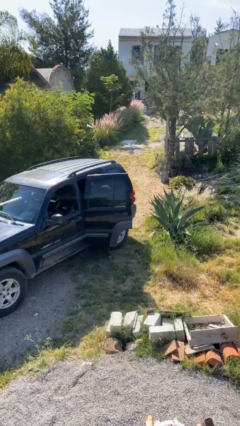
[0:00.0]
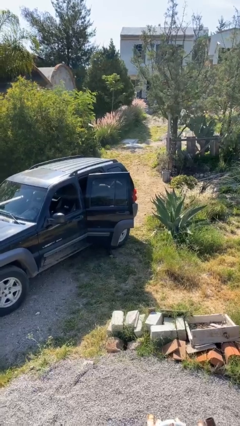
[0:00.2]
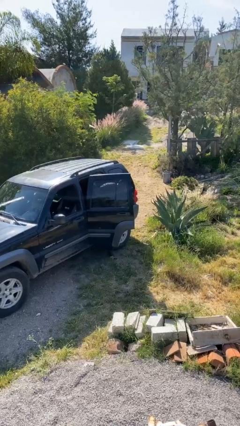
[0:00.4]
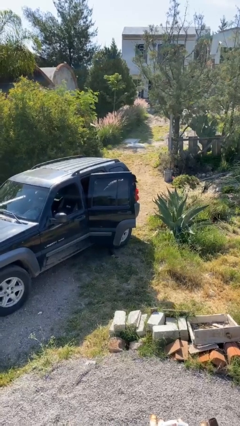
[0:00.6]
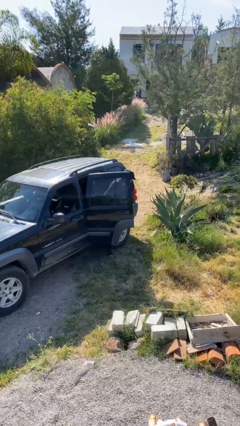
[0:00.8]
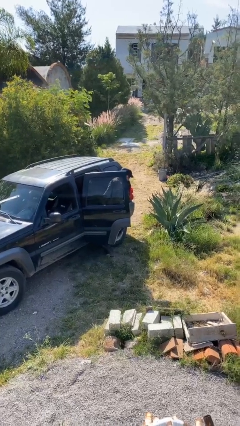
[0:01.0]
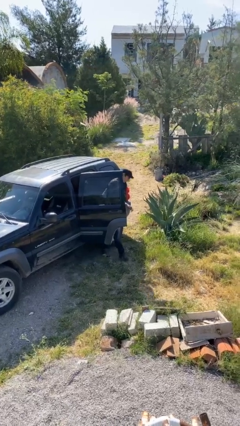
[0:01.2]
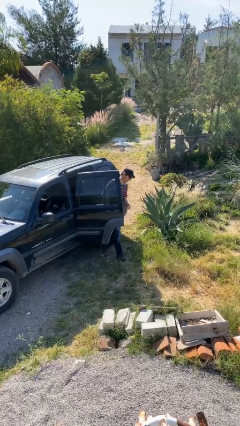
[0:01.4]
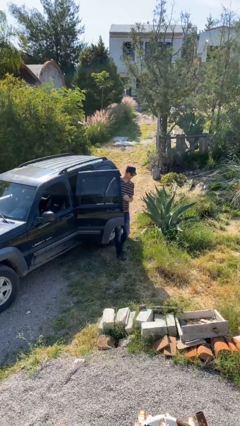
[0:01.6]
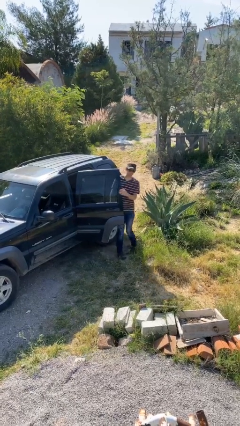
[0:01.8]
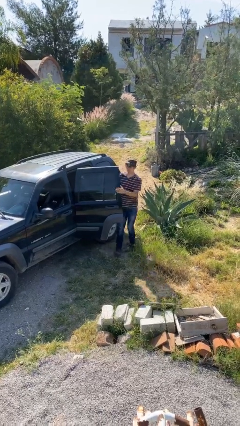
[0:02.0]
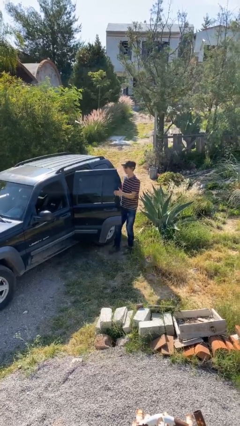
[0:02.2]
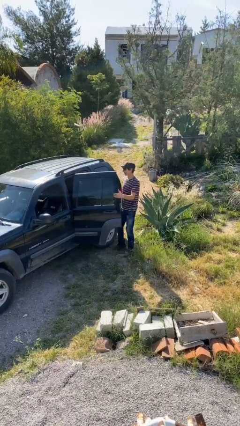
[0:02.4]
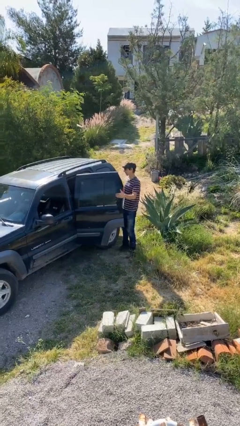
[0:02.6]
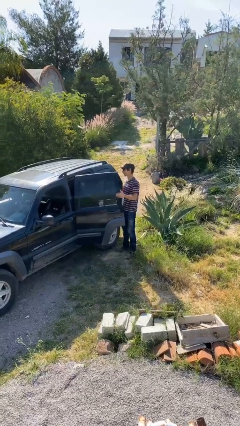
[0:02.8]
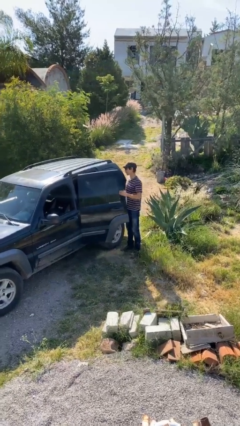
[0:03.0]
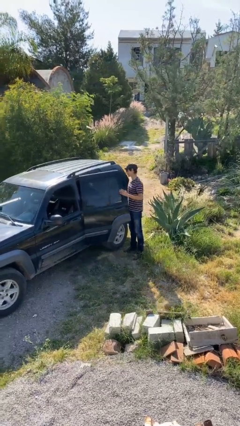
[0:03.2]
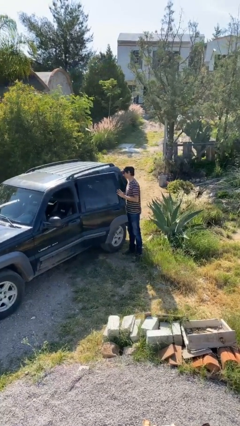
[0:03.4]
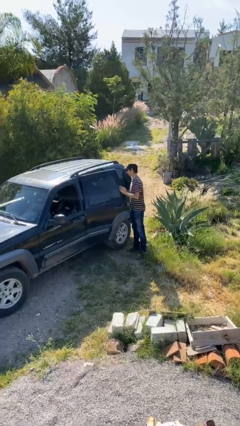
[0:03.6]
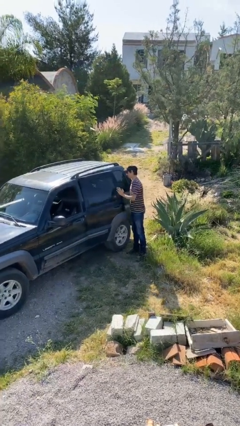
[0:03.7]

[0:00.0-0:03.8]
person exits car

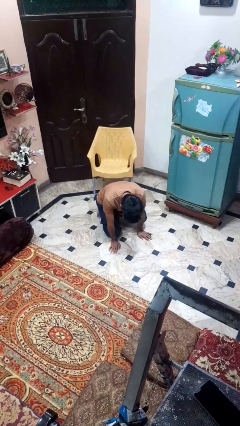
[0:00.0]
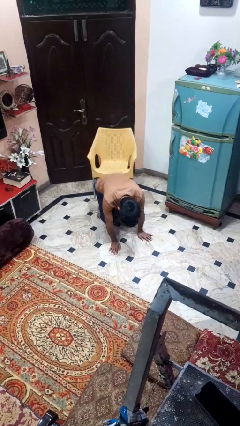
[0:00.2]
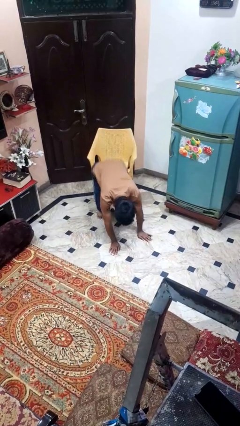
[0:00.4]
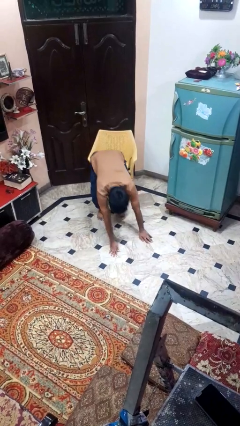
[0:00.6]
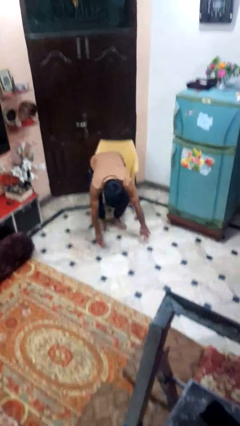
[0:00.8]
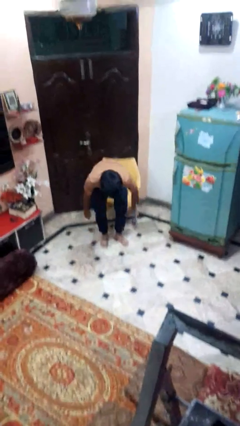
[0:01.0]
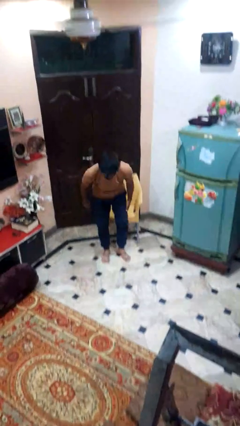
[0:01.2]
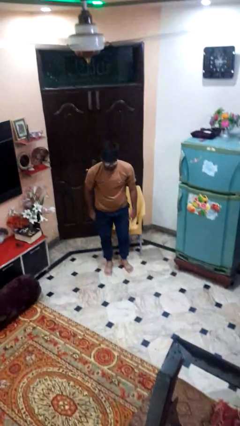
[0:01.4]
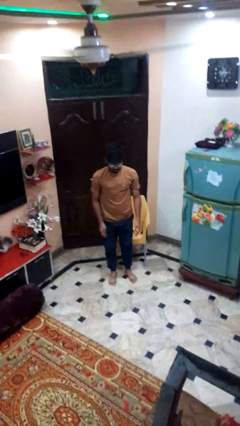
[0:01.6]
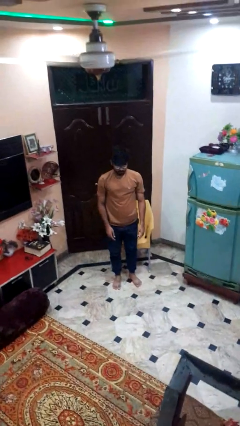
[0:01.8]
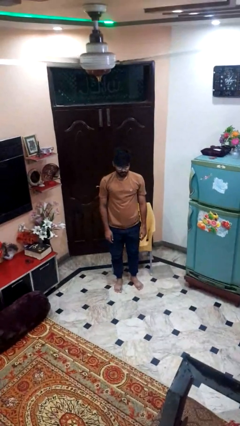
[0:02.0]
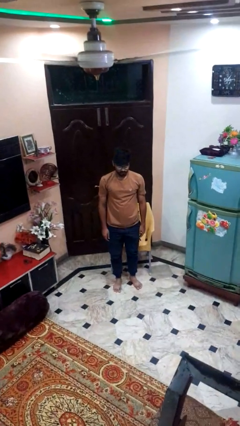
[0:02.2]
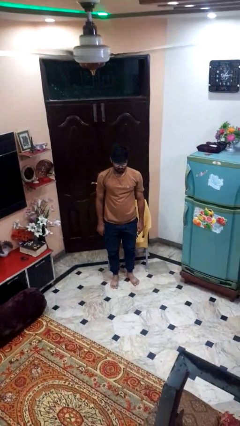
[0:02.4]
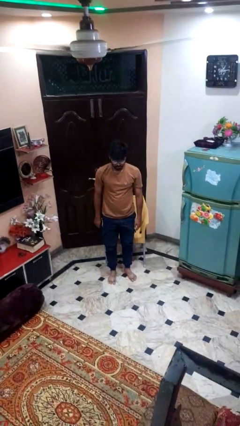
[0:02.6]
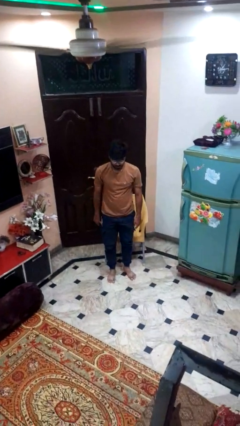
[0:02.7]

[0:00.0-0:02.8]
person stands up from floor

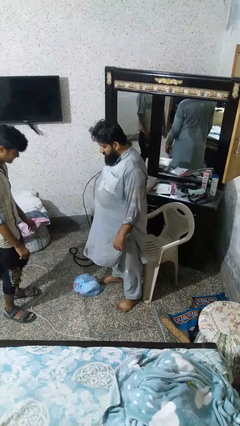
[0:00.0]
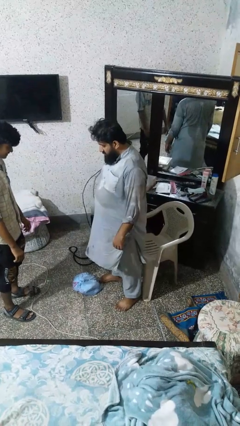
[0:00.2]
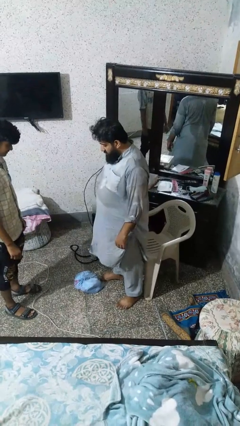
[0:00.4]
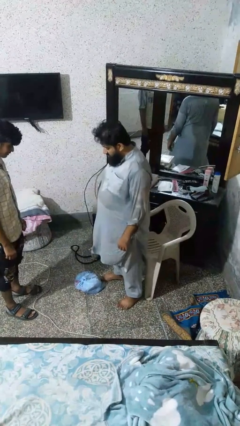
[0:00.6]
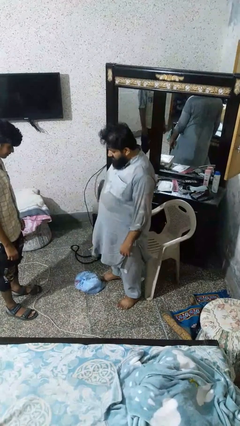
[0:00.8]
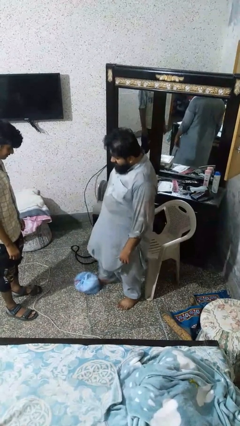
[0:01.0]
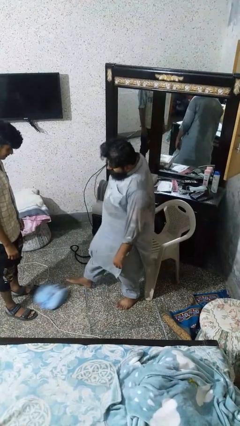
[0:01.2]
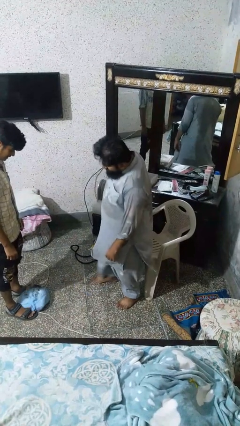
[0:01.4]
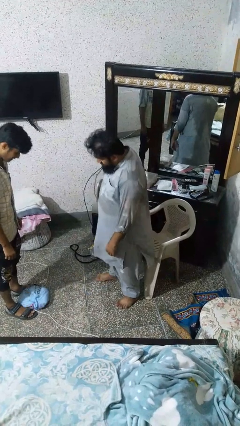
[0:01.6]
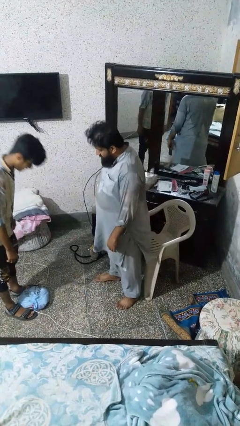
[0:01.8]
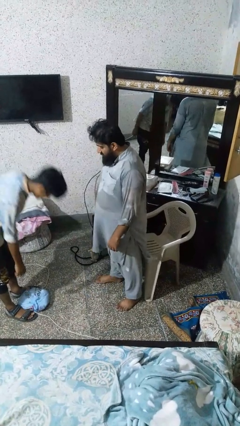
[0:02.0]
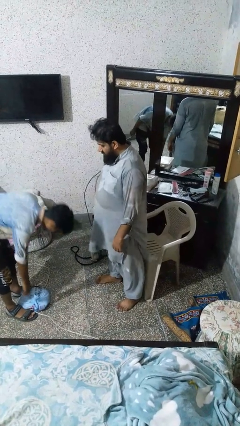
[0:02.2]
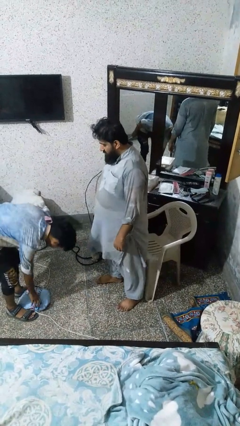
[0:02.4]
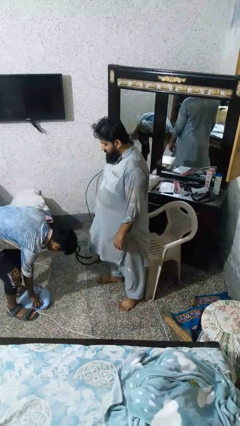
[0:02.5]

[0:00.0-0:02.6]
person kicks object to person

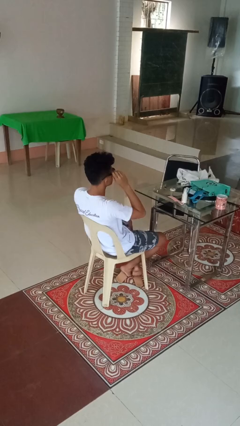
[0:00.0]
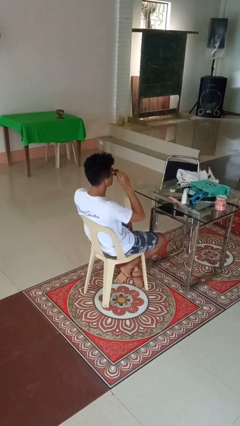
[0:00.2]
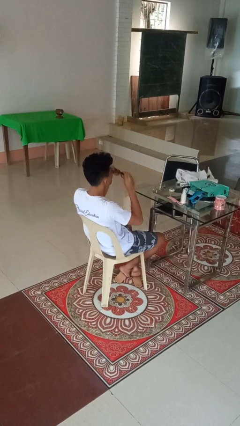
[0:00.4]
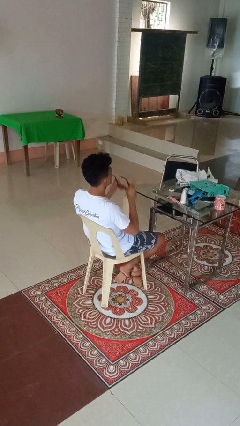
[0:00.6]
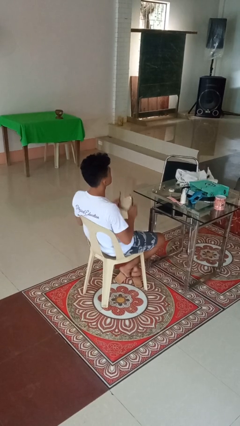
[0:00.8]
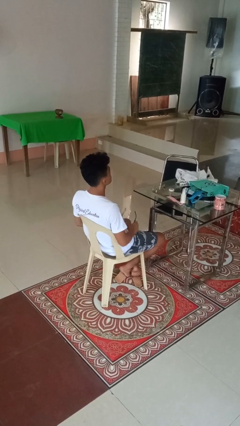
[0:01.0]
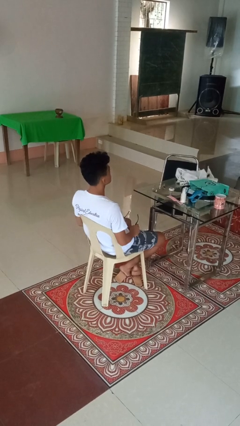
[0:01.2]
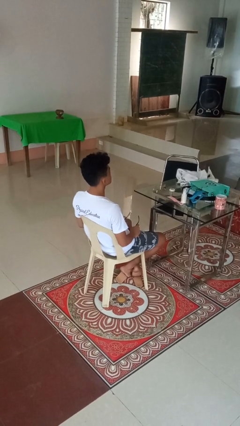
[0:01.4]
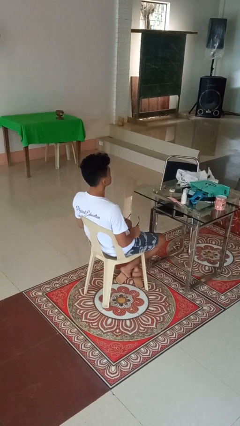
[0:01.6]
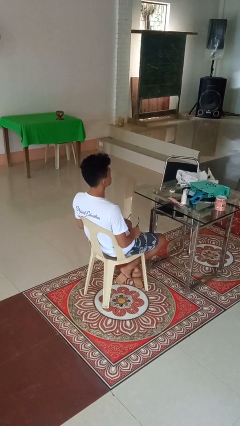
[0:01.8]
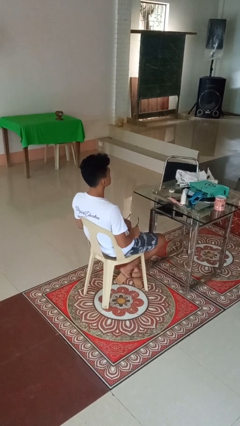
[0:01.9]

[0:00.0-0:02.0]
person takes off sunglasses

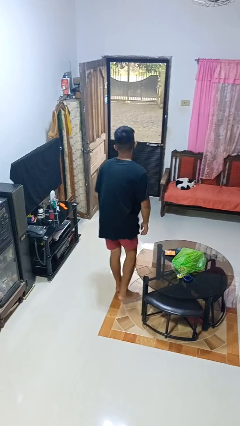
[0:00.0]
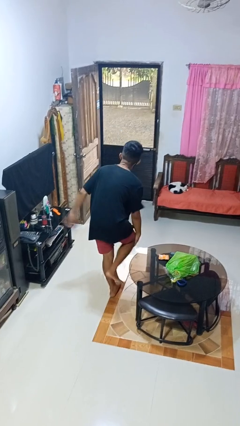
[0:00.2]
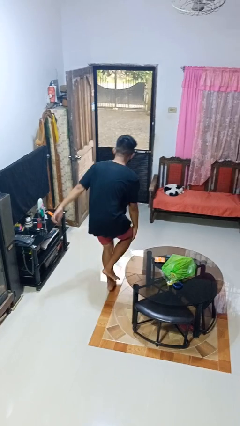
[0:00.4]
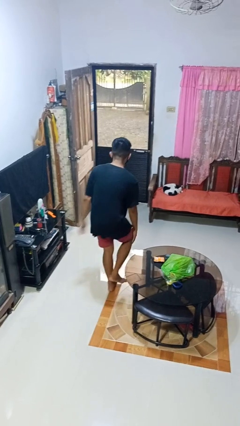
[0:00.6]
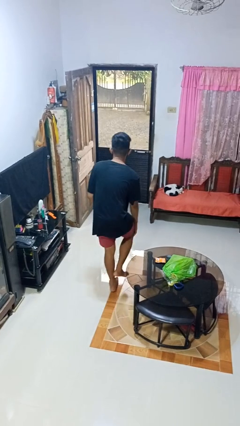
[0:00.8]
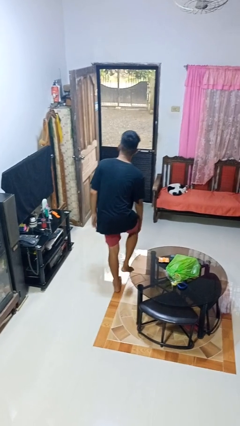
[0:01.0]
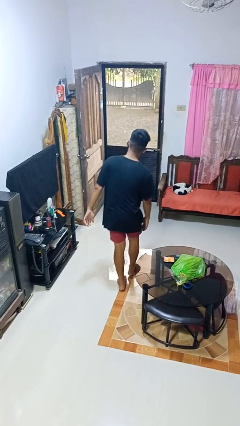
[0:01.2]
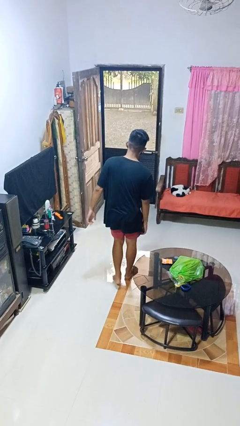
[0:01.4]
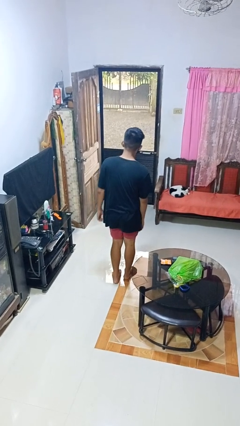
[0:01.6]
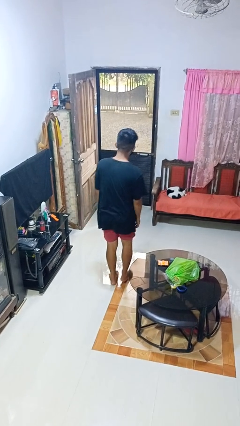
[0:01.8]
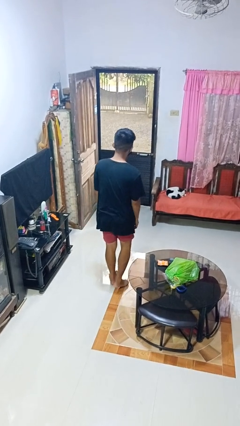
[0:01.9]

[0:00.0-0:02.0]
person bumps into table

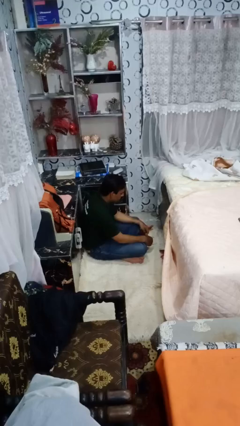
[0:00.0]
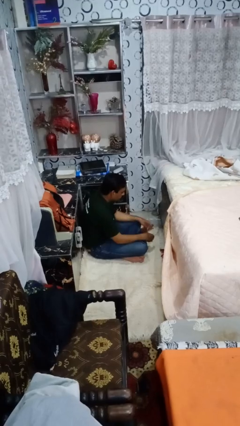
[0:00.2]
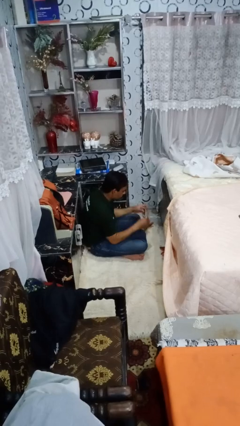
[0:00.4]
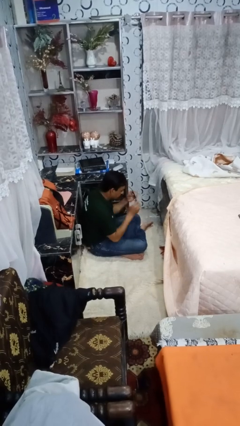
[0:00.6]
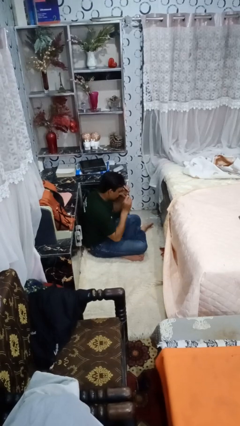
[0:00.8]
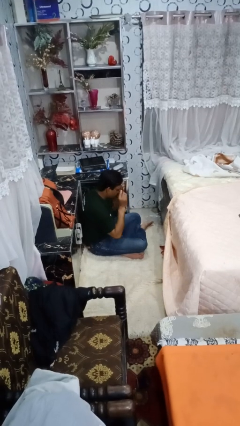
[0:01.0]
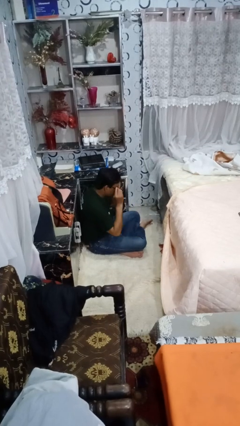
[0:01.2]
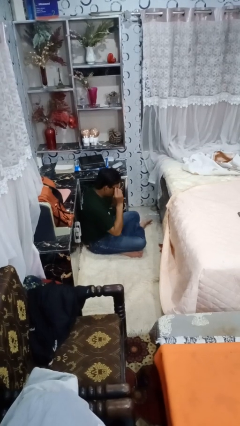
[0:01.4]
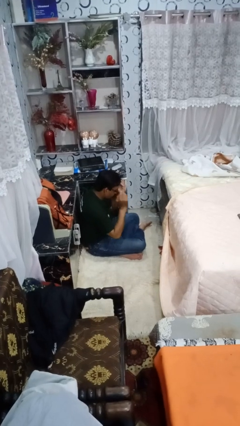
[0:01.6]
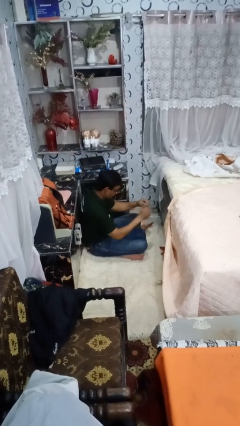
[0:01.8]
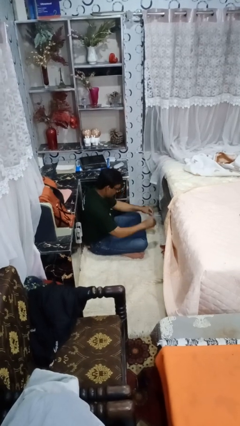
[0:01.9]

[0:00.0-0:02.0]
person puts on glasses

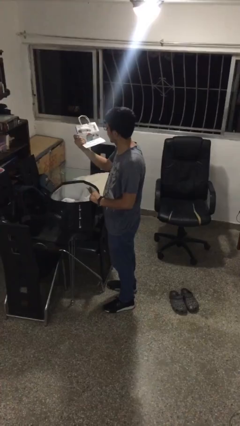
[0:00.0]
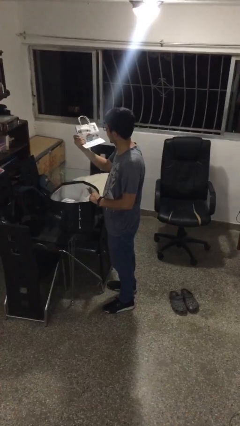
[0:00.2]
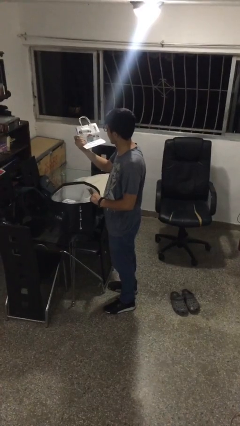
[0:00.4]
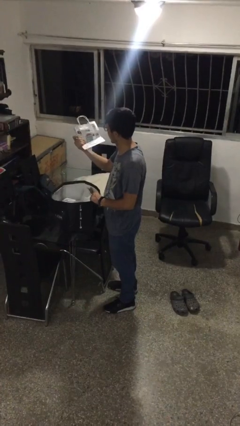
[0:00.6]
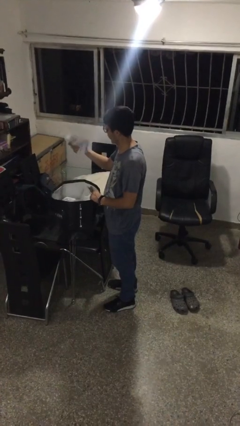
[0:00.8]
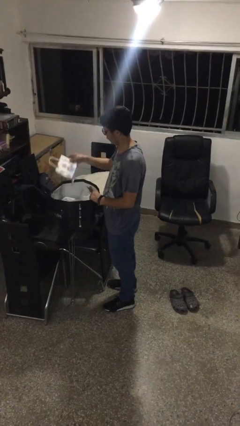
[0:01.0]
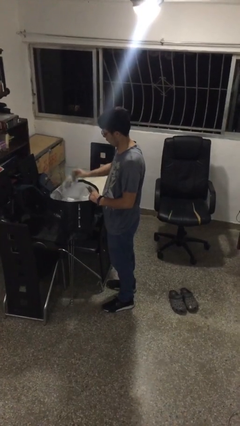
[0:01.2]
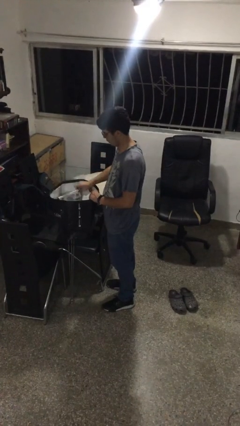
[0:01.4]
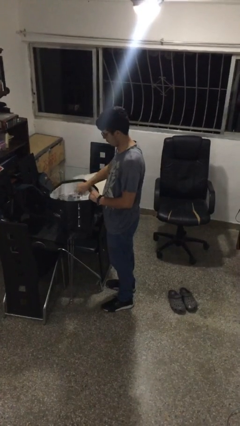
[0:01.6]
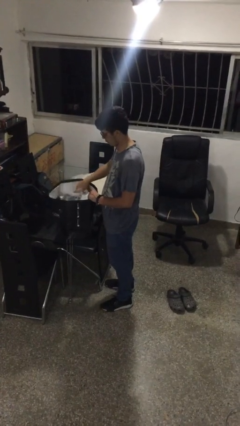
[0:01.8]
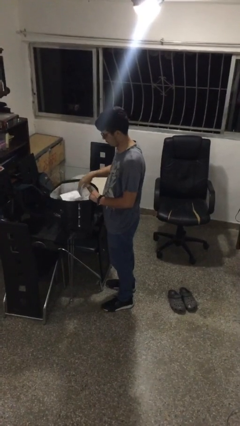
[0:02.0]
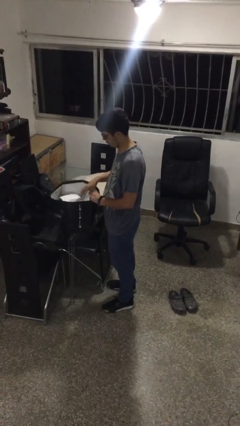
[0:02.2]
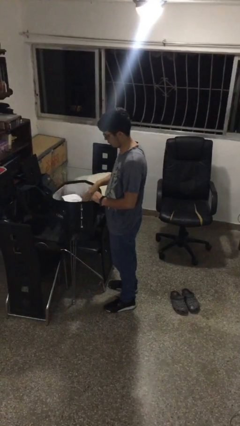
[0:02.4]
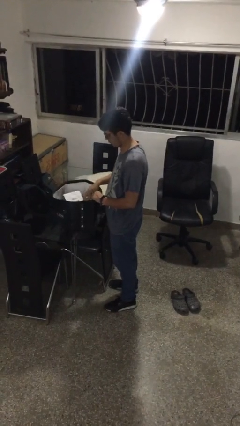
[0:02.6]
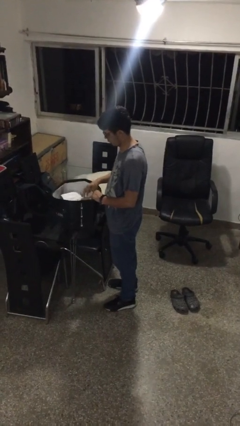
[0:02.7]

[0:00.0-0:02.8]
person puts object into bag
